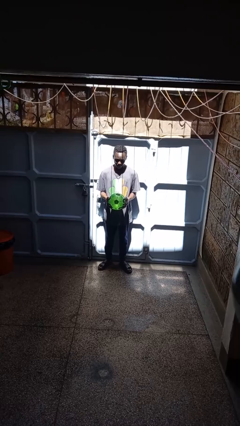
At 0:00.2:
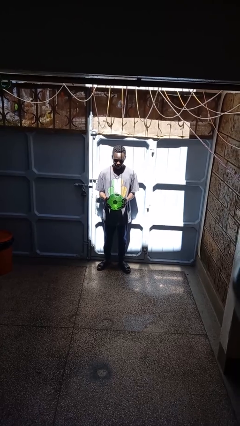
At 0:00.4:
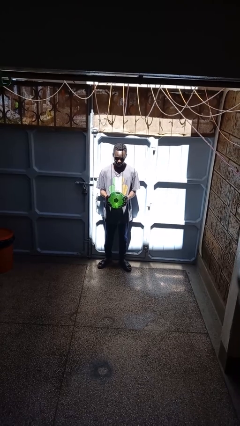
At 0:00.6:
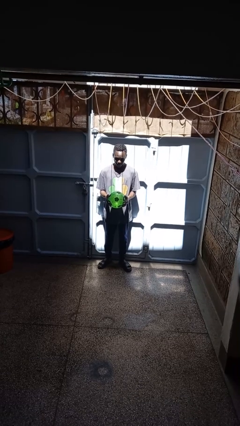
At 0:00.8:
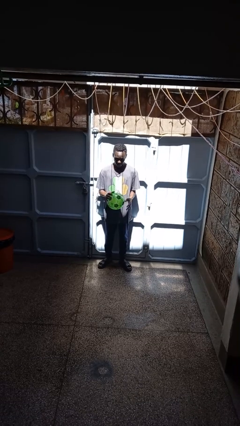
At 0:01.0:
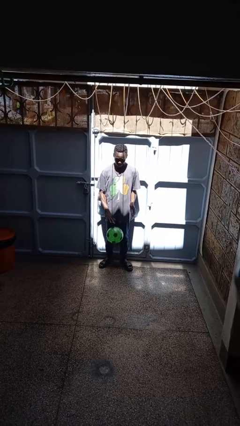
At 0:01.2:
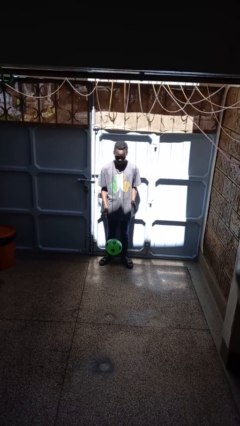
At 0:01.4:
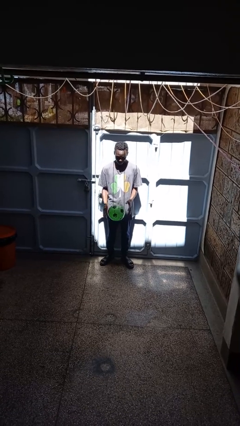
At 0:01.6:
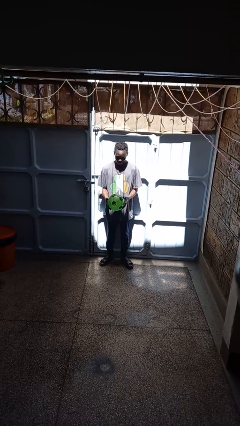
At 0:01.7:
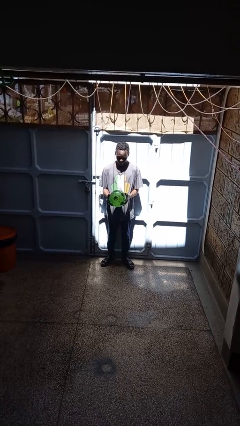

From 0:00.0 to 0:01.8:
person bounces ball on floor

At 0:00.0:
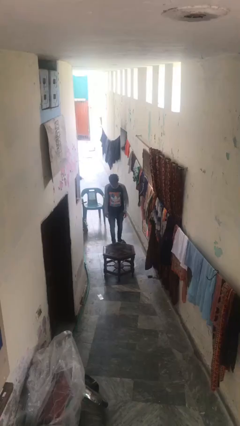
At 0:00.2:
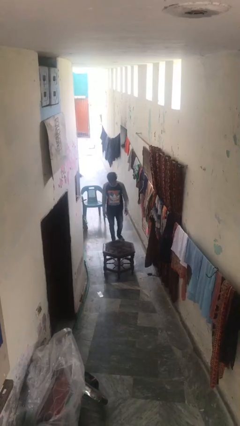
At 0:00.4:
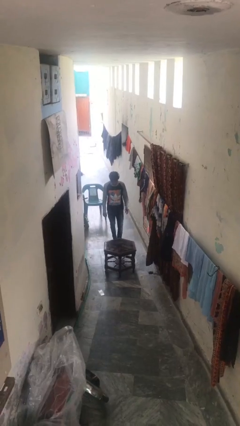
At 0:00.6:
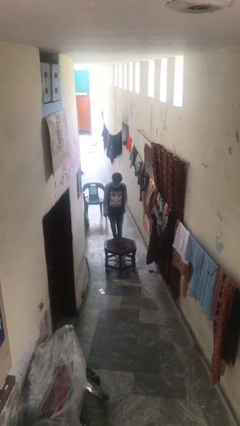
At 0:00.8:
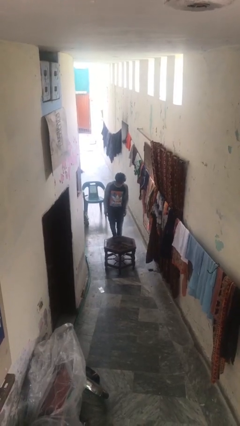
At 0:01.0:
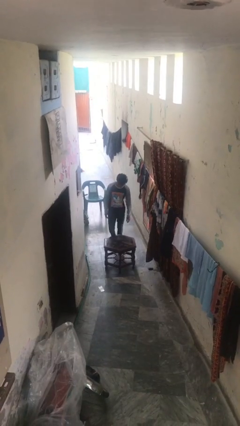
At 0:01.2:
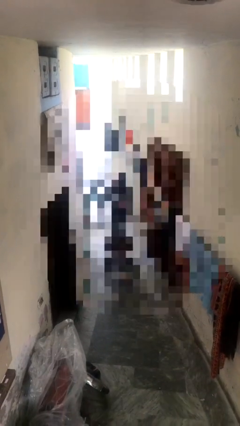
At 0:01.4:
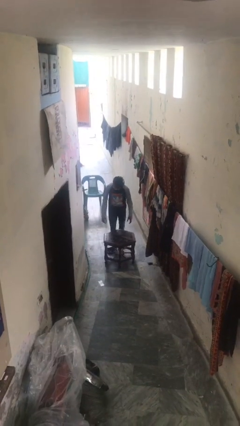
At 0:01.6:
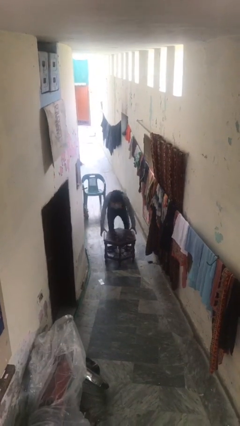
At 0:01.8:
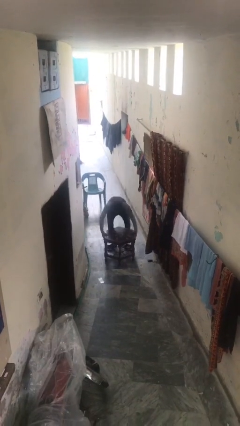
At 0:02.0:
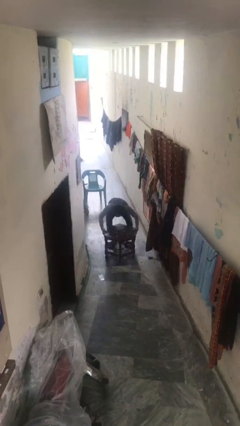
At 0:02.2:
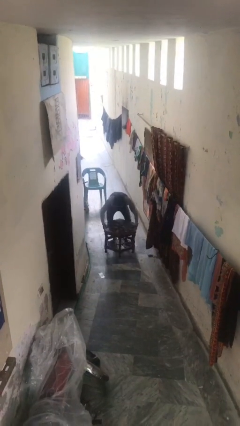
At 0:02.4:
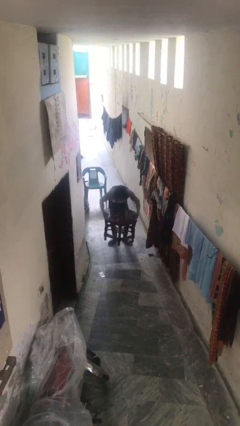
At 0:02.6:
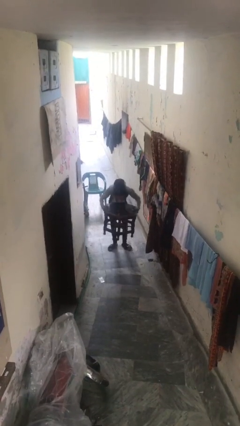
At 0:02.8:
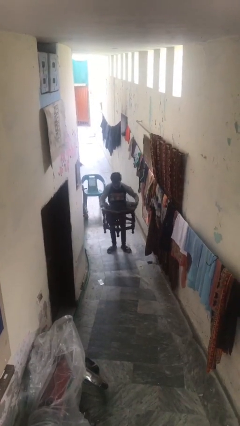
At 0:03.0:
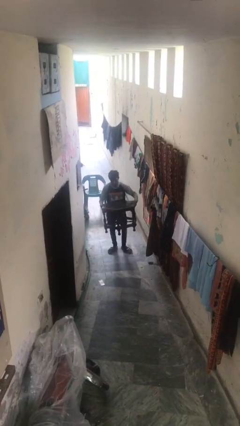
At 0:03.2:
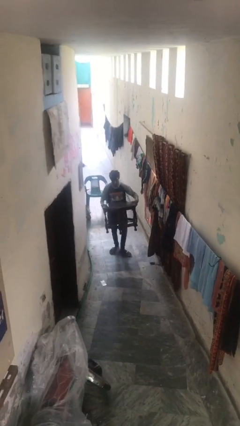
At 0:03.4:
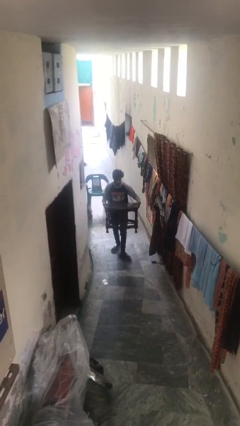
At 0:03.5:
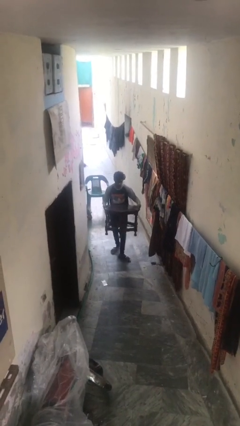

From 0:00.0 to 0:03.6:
person picks up object from floor

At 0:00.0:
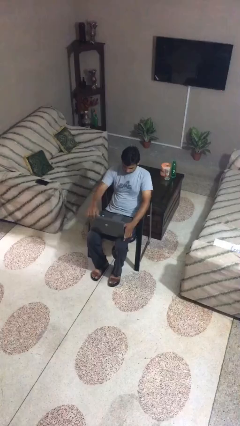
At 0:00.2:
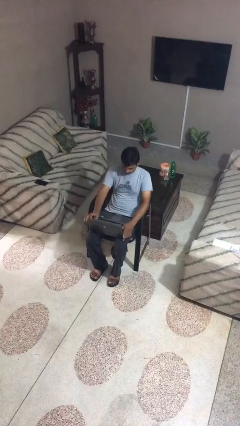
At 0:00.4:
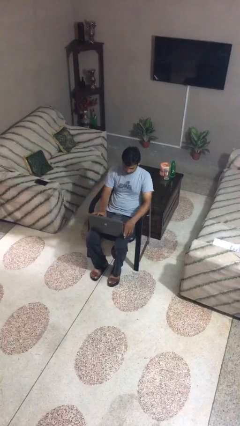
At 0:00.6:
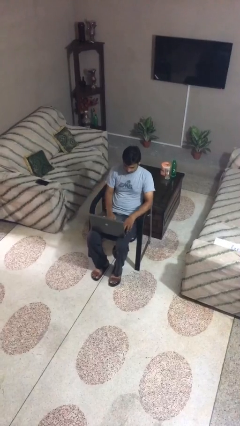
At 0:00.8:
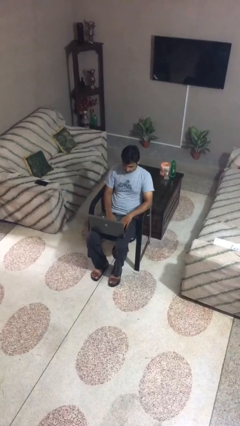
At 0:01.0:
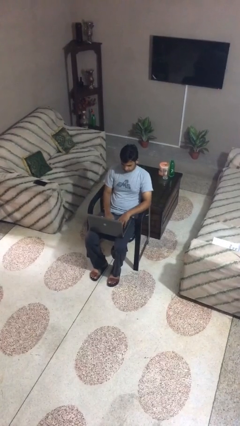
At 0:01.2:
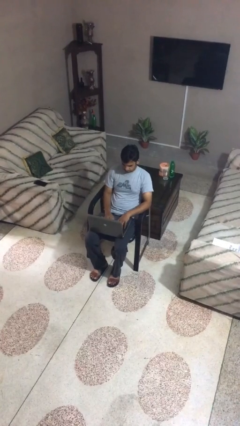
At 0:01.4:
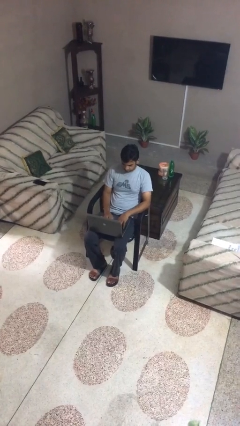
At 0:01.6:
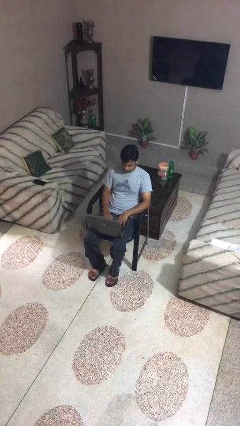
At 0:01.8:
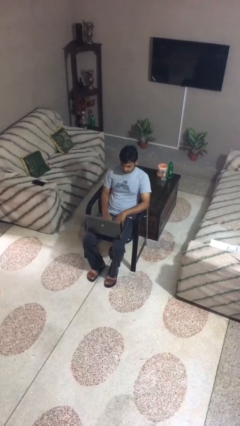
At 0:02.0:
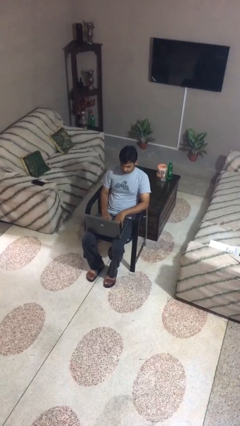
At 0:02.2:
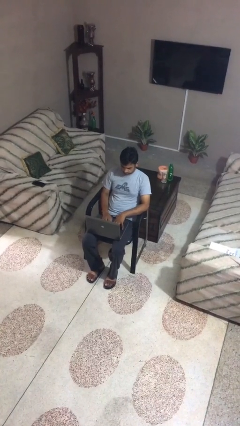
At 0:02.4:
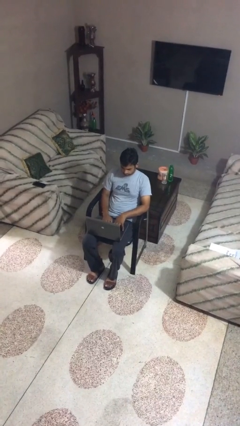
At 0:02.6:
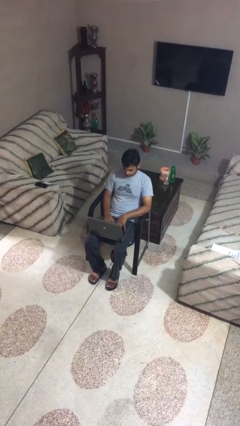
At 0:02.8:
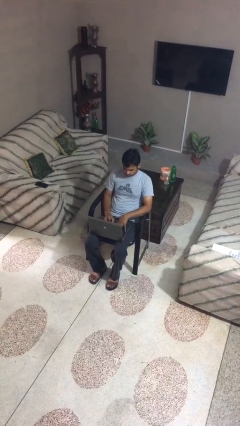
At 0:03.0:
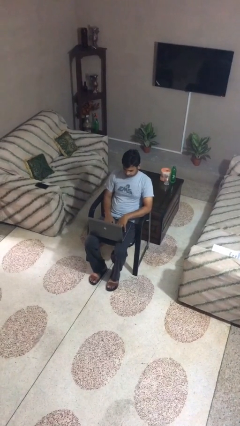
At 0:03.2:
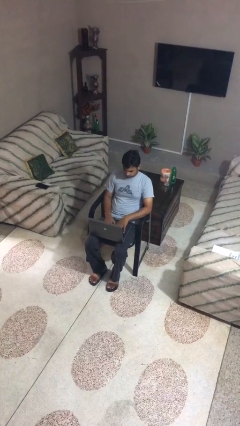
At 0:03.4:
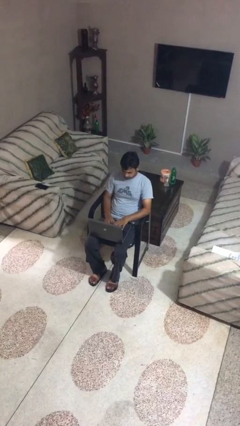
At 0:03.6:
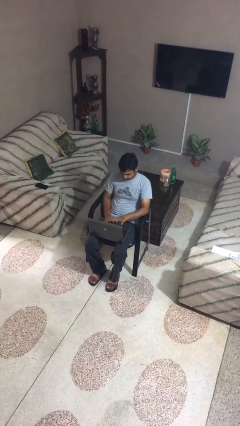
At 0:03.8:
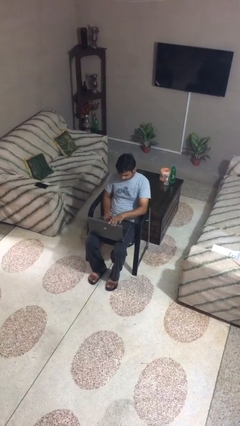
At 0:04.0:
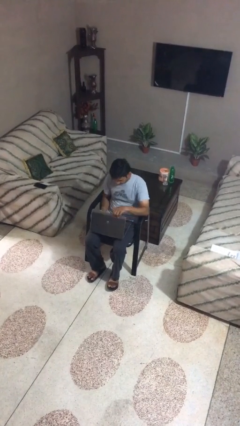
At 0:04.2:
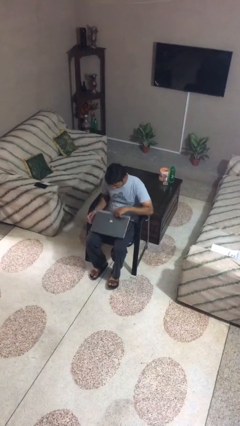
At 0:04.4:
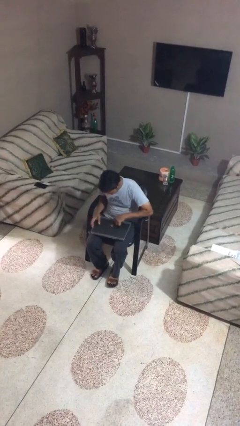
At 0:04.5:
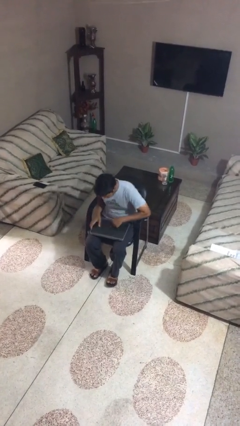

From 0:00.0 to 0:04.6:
person interacts with laptop

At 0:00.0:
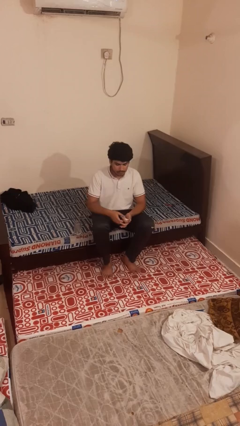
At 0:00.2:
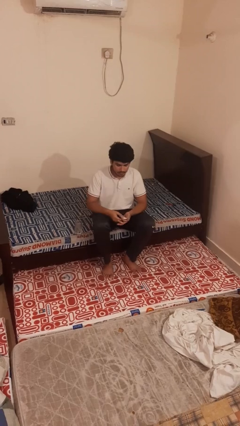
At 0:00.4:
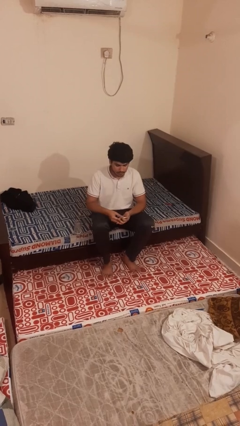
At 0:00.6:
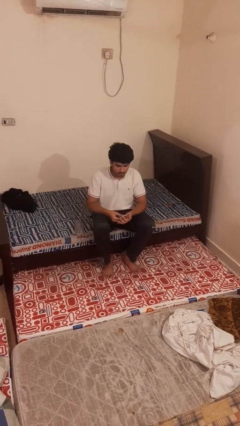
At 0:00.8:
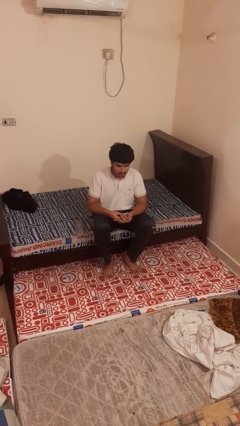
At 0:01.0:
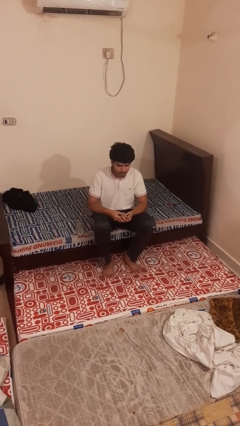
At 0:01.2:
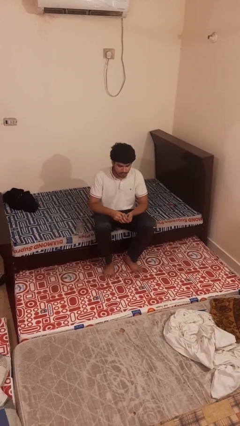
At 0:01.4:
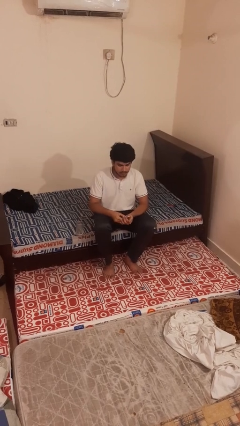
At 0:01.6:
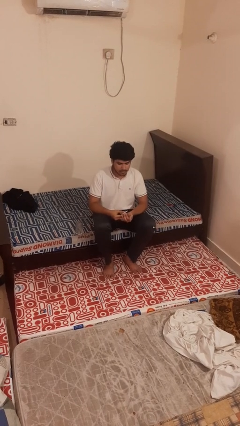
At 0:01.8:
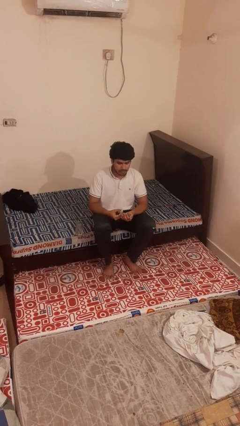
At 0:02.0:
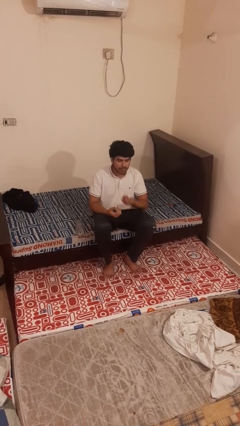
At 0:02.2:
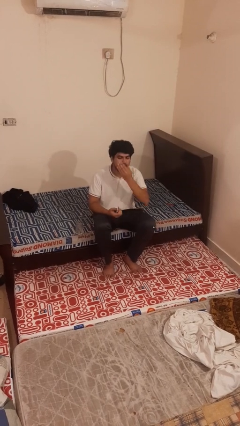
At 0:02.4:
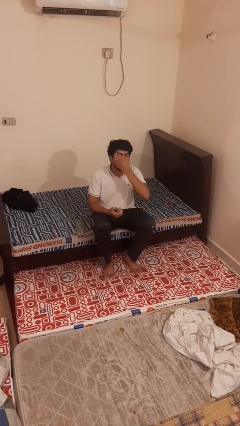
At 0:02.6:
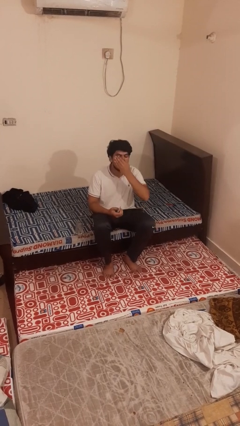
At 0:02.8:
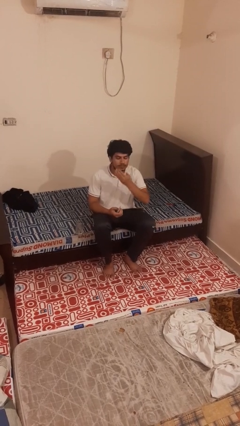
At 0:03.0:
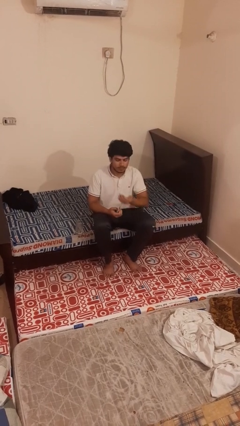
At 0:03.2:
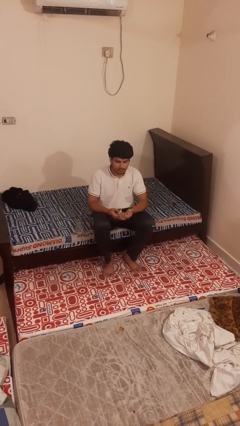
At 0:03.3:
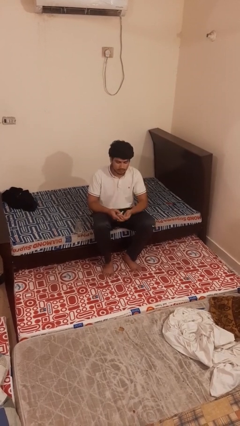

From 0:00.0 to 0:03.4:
person takes medicine pills

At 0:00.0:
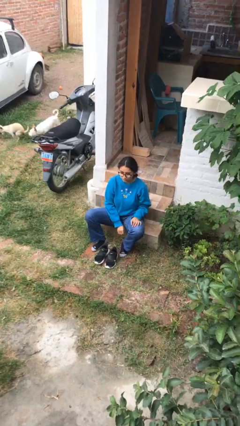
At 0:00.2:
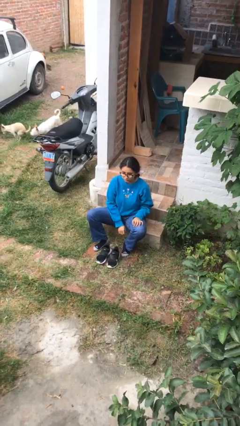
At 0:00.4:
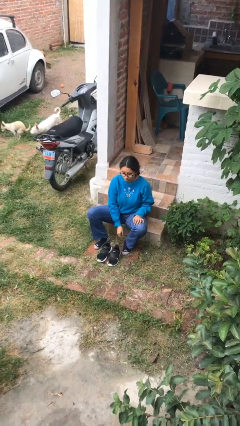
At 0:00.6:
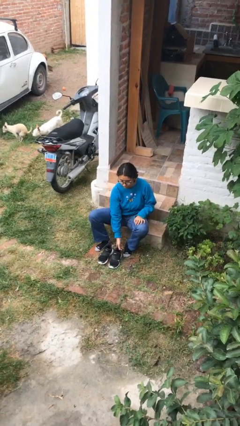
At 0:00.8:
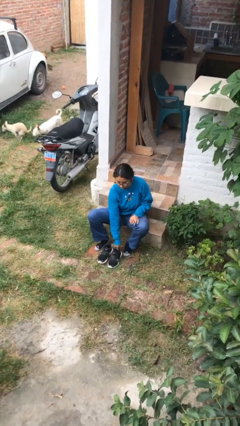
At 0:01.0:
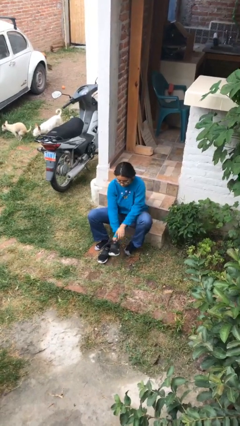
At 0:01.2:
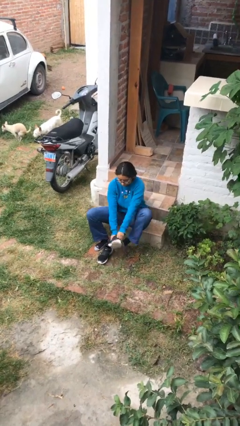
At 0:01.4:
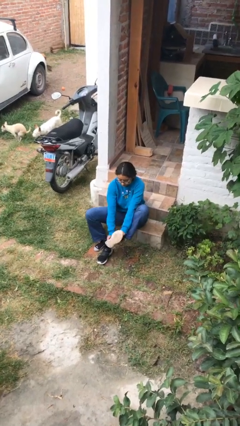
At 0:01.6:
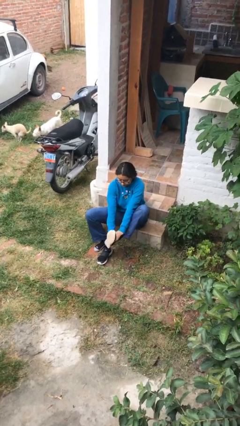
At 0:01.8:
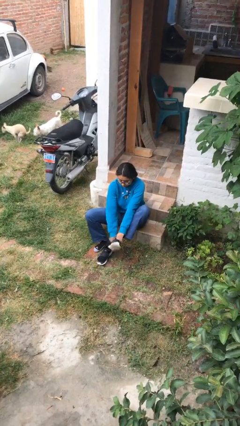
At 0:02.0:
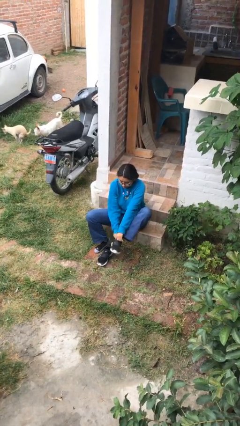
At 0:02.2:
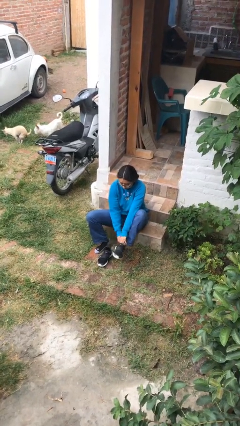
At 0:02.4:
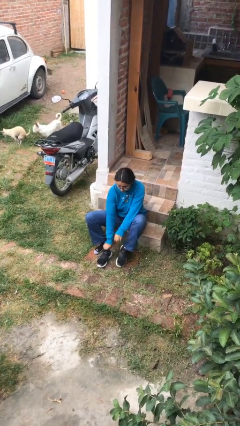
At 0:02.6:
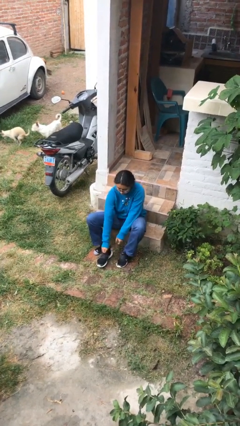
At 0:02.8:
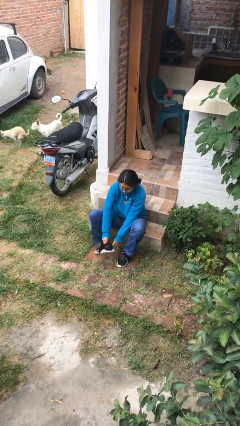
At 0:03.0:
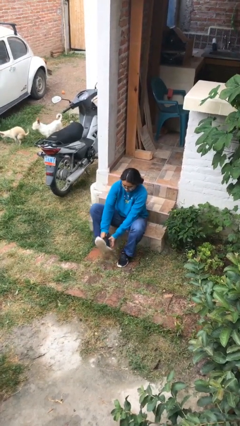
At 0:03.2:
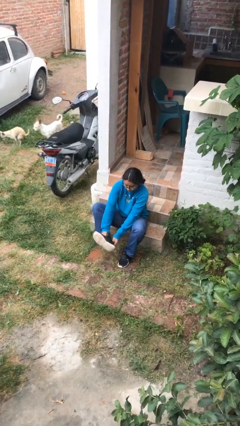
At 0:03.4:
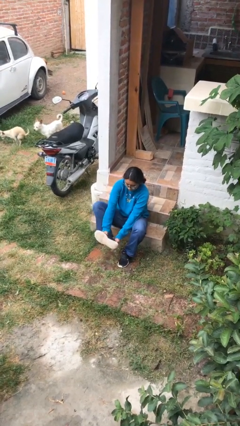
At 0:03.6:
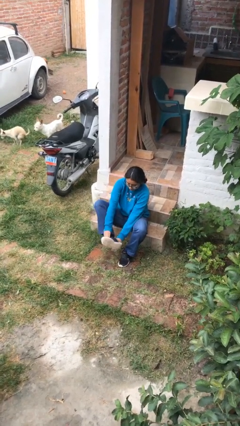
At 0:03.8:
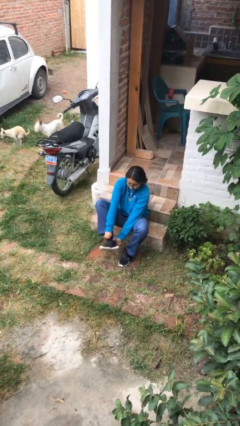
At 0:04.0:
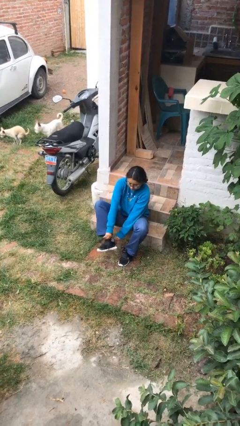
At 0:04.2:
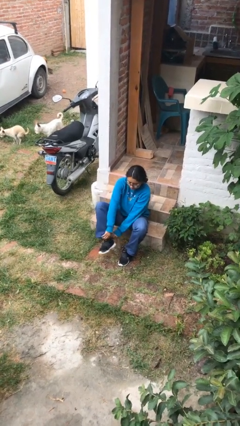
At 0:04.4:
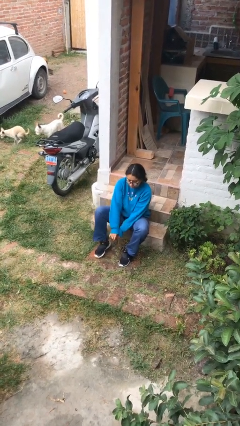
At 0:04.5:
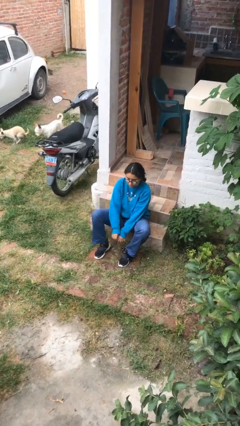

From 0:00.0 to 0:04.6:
person puts on shoes
